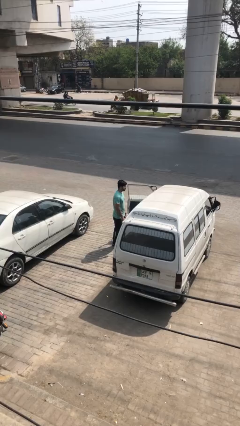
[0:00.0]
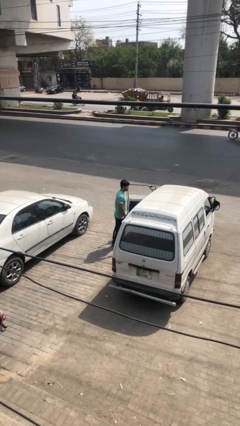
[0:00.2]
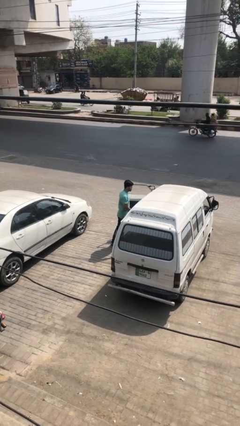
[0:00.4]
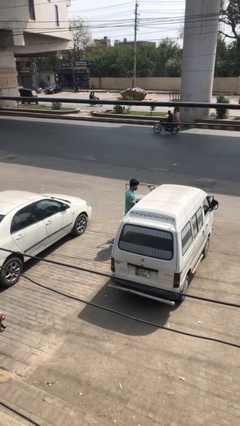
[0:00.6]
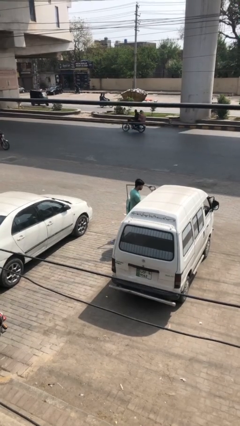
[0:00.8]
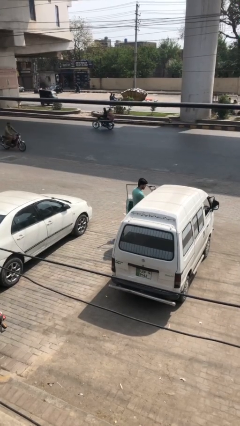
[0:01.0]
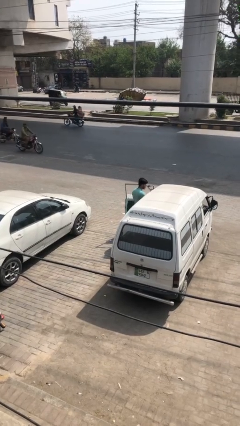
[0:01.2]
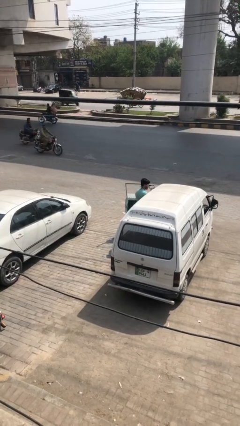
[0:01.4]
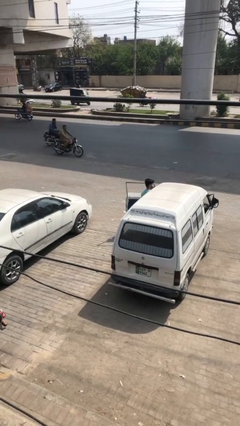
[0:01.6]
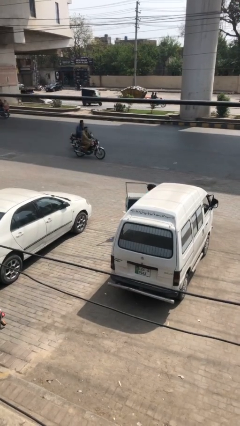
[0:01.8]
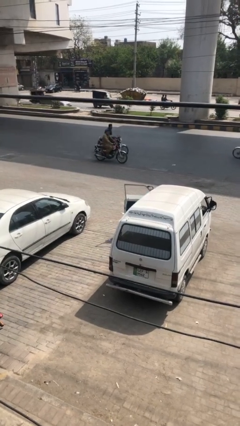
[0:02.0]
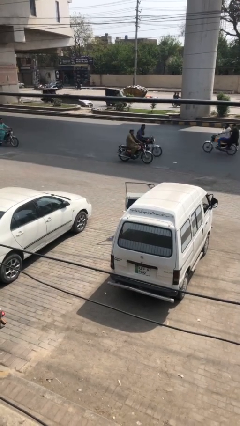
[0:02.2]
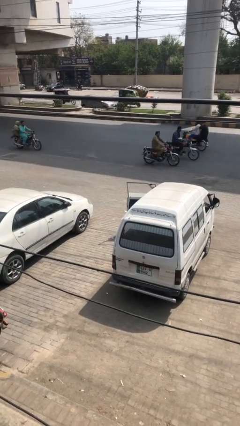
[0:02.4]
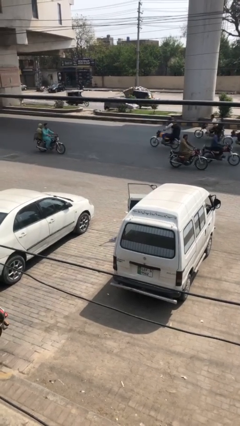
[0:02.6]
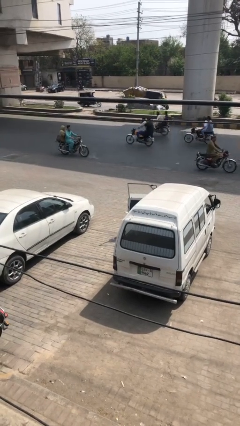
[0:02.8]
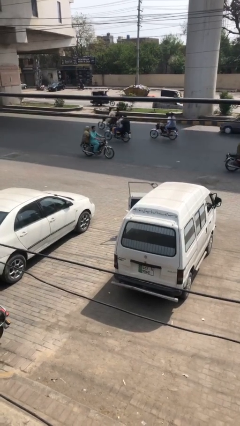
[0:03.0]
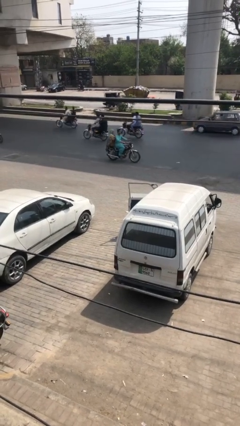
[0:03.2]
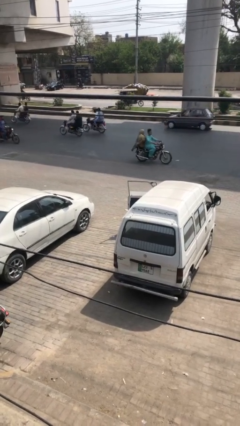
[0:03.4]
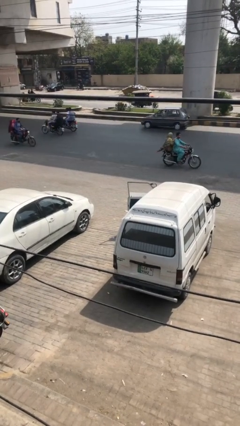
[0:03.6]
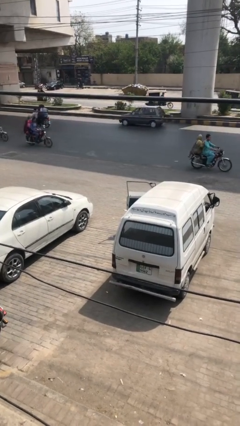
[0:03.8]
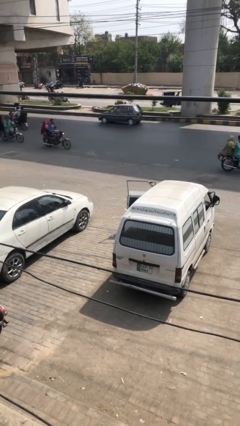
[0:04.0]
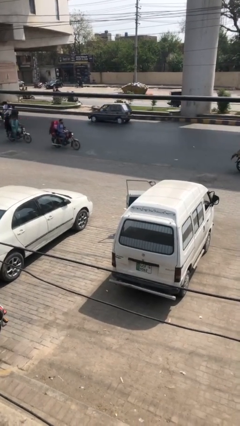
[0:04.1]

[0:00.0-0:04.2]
person enters car

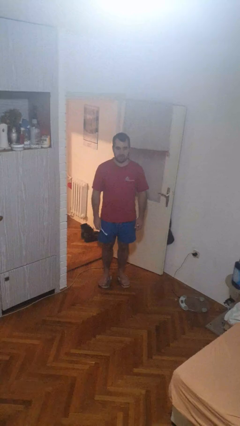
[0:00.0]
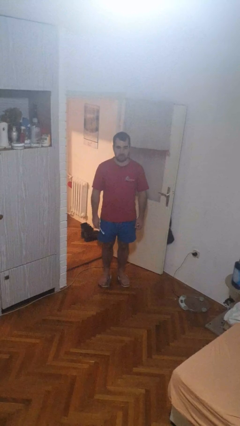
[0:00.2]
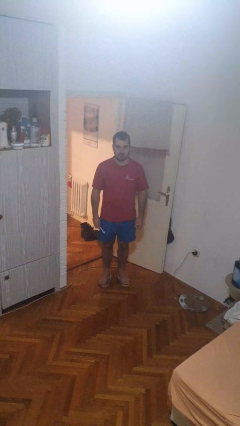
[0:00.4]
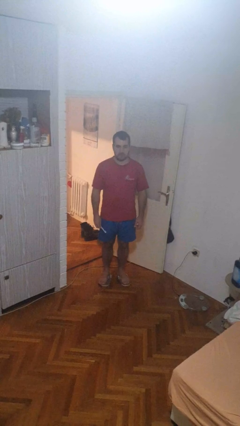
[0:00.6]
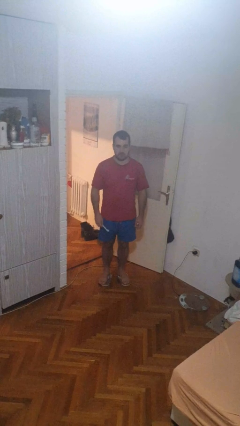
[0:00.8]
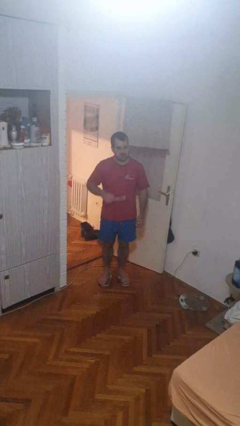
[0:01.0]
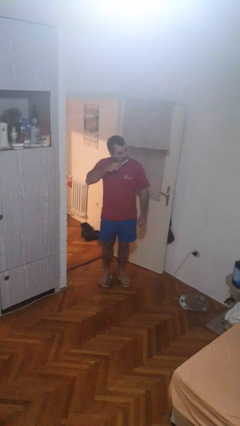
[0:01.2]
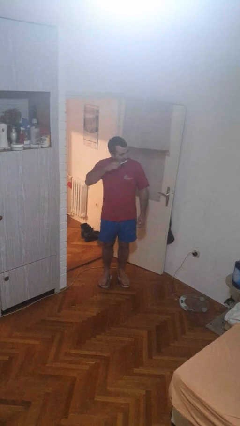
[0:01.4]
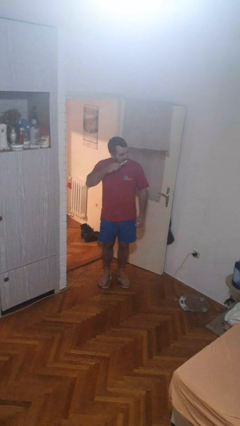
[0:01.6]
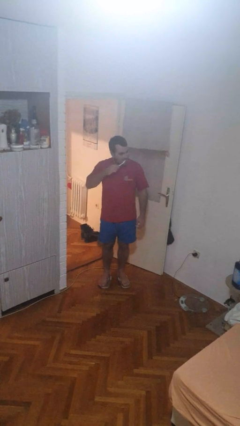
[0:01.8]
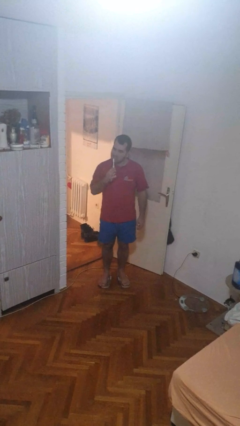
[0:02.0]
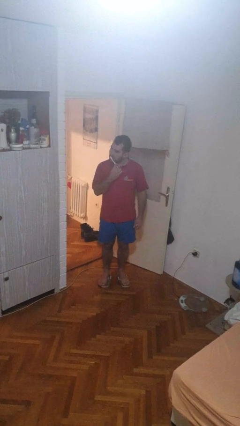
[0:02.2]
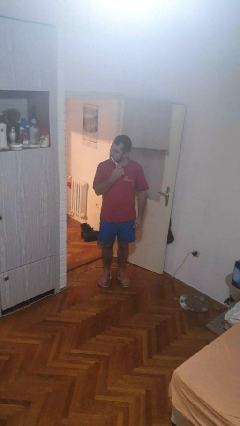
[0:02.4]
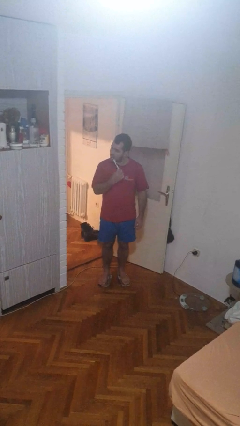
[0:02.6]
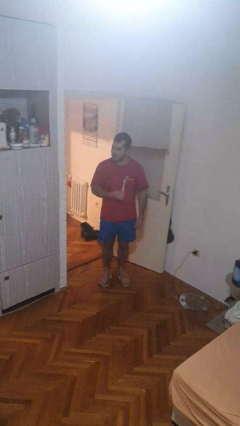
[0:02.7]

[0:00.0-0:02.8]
person brushes teeth

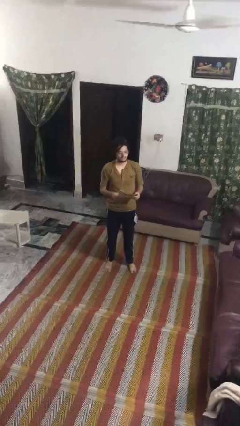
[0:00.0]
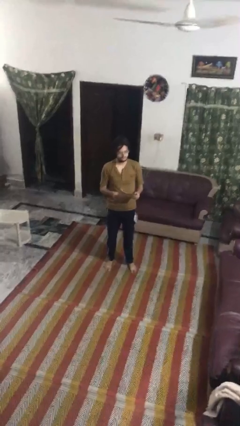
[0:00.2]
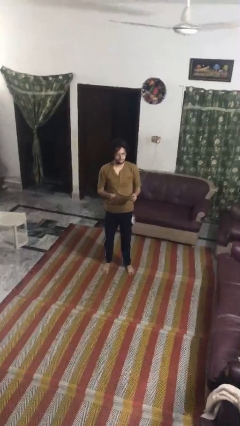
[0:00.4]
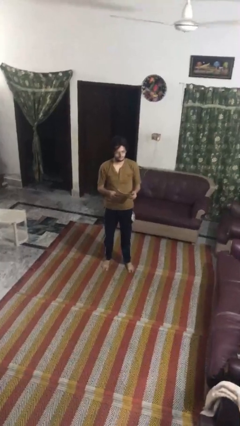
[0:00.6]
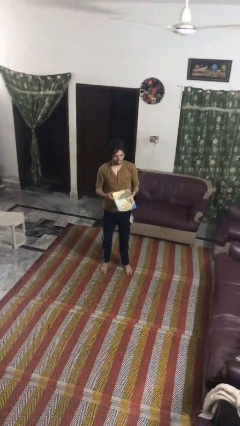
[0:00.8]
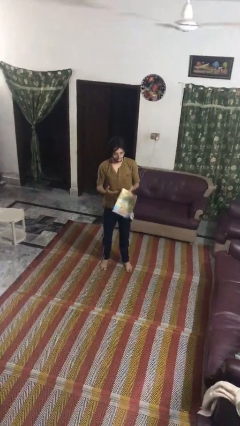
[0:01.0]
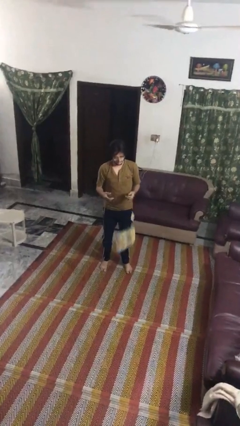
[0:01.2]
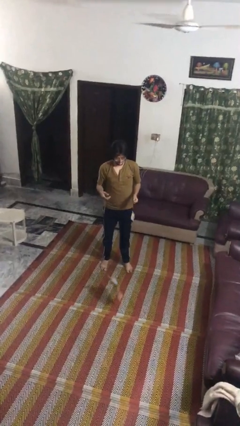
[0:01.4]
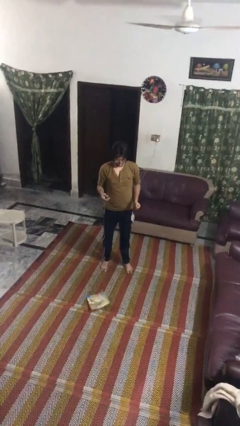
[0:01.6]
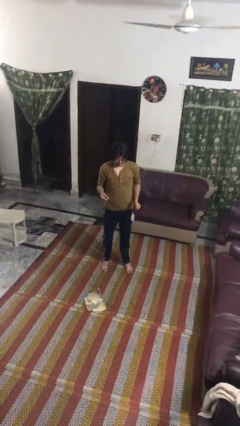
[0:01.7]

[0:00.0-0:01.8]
person drops object

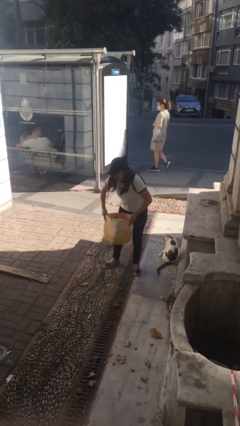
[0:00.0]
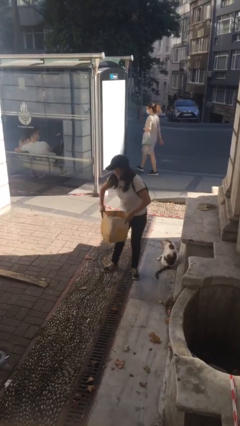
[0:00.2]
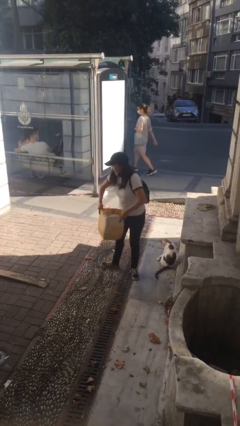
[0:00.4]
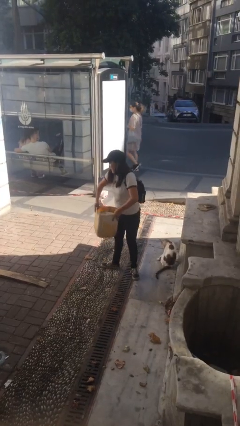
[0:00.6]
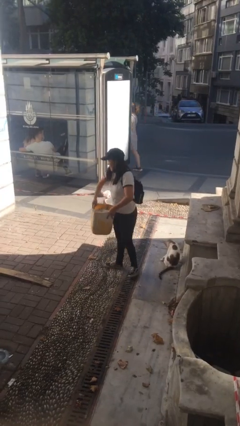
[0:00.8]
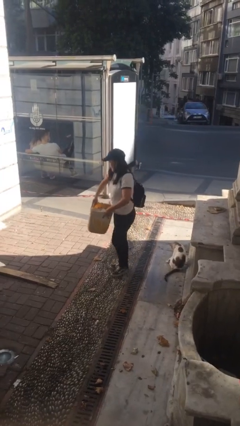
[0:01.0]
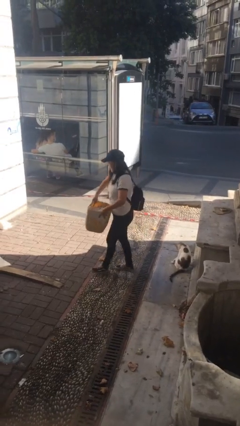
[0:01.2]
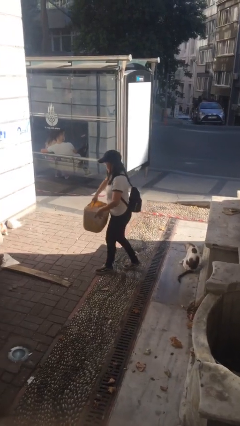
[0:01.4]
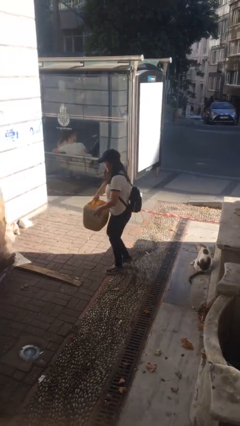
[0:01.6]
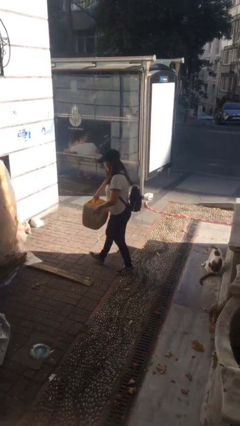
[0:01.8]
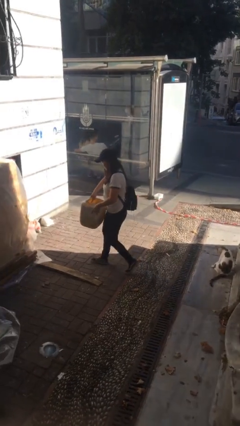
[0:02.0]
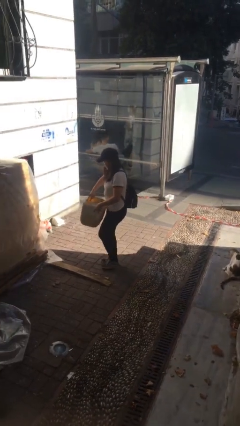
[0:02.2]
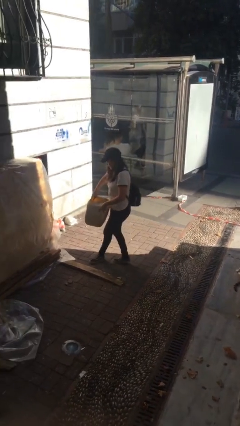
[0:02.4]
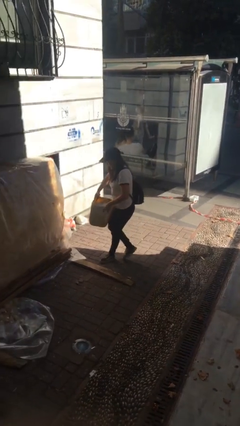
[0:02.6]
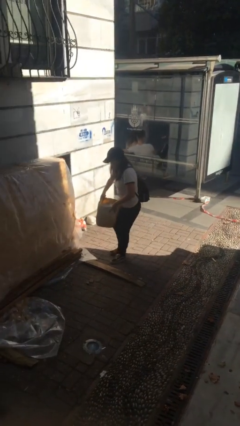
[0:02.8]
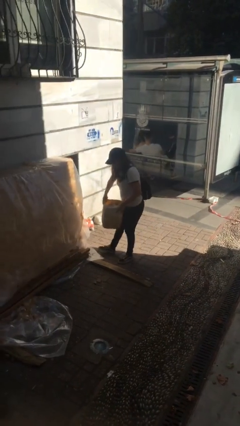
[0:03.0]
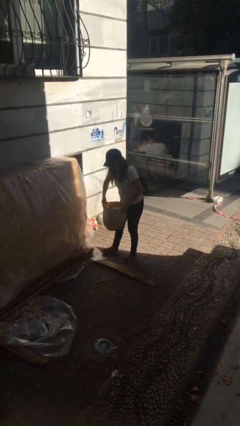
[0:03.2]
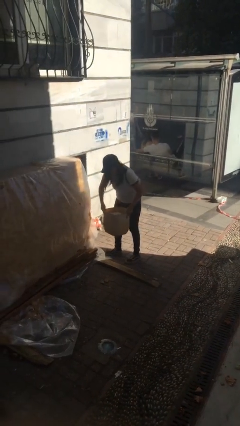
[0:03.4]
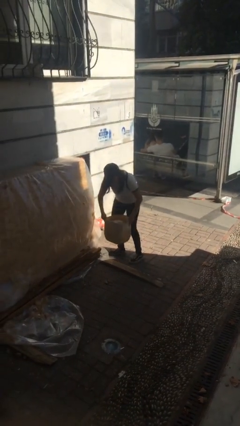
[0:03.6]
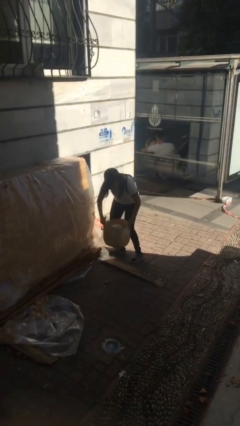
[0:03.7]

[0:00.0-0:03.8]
person carries heavy object

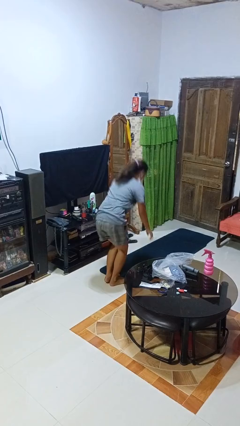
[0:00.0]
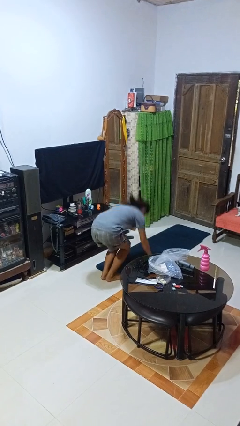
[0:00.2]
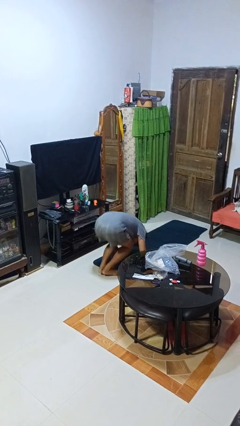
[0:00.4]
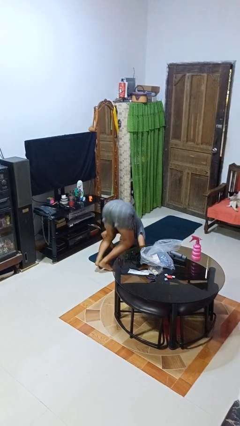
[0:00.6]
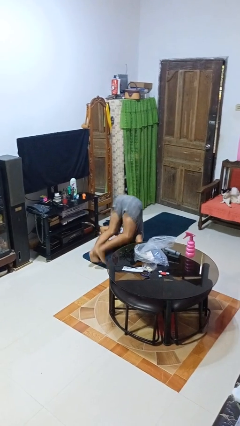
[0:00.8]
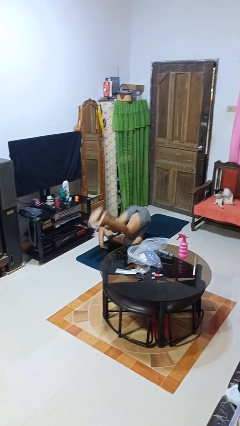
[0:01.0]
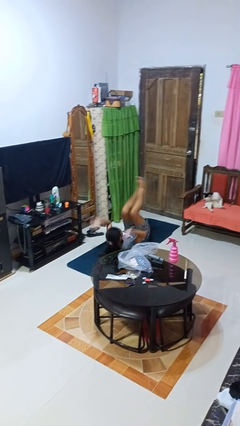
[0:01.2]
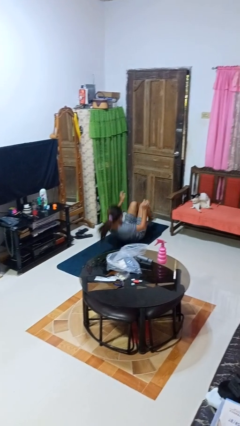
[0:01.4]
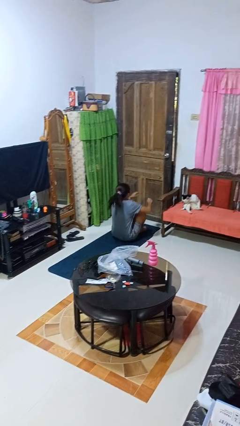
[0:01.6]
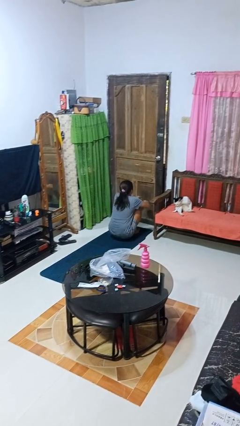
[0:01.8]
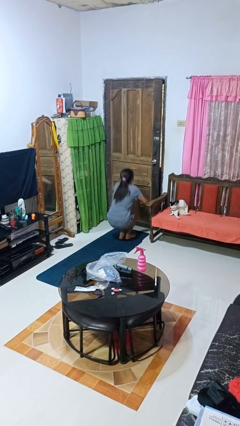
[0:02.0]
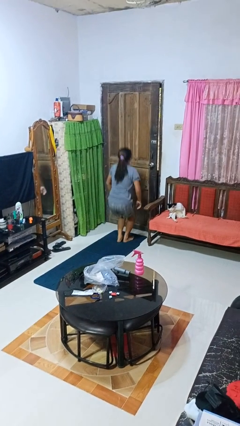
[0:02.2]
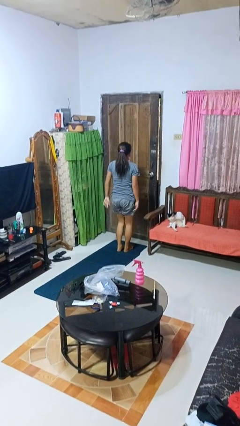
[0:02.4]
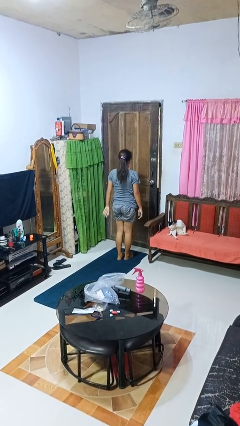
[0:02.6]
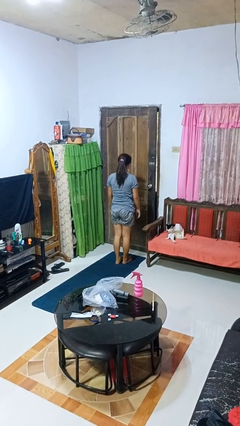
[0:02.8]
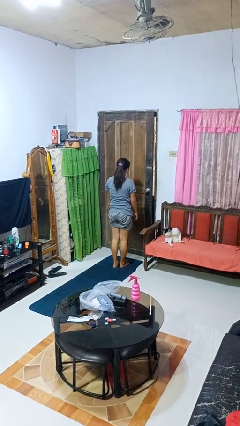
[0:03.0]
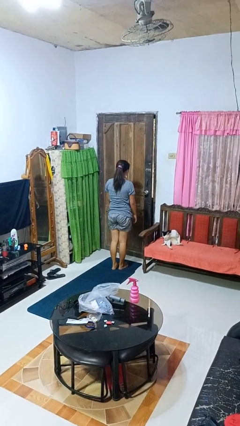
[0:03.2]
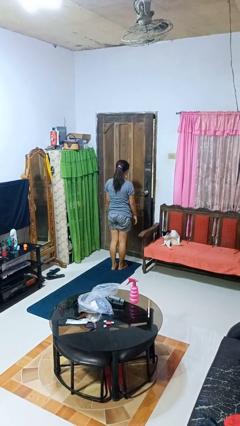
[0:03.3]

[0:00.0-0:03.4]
person somersaults

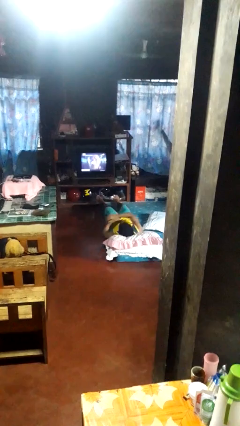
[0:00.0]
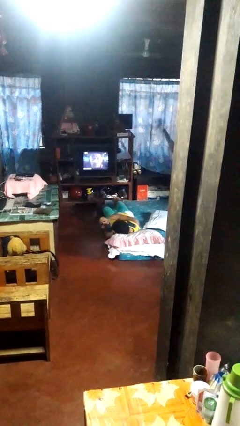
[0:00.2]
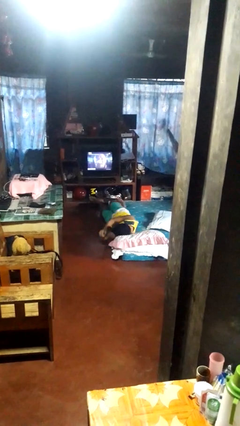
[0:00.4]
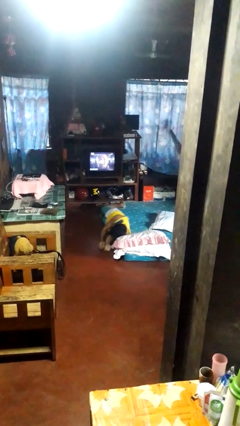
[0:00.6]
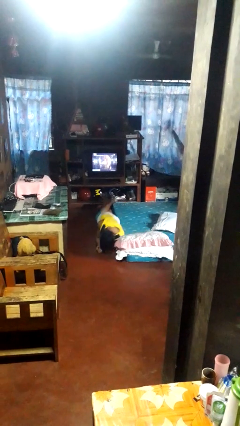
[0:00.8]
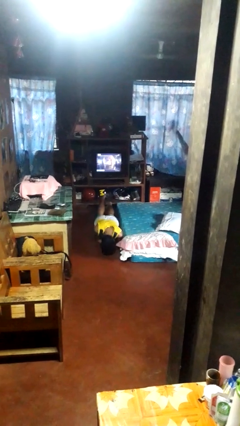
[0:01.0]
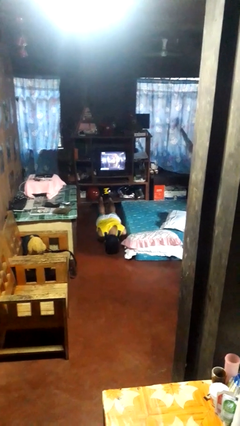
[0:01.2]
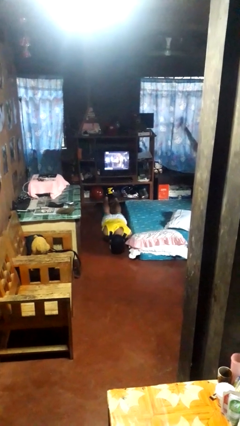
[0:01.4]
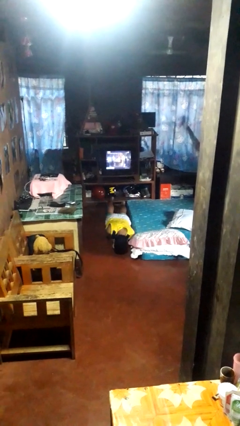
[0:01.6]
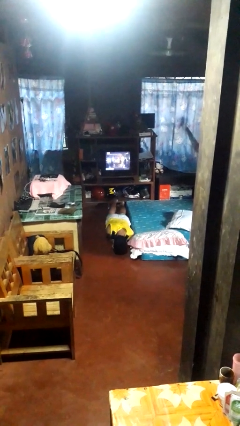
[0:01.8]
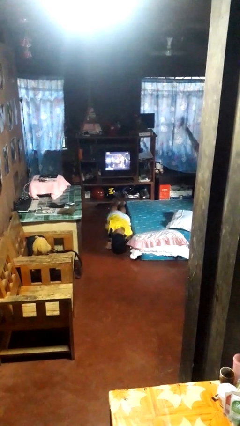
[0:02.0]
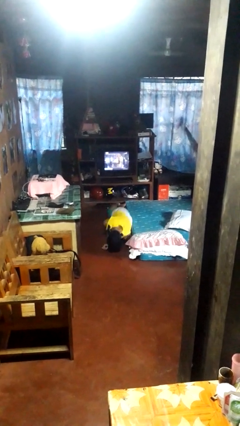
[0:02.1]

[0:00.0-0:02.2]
person falls from bed
